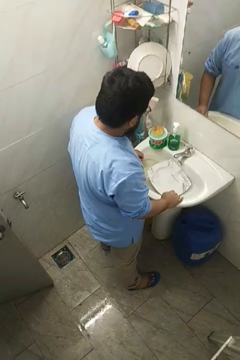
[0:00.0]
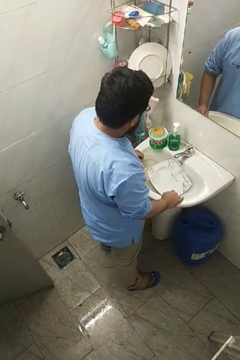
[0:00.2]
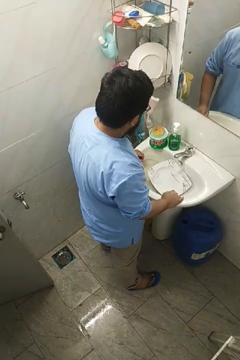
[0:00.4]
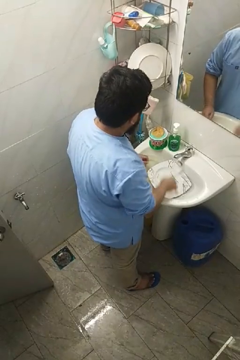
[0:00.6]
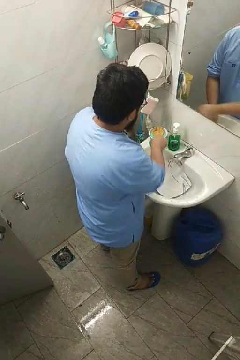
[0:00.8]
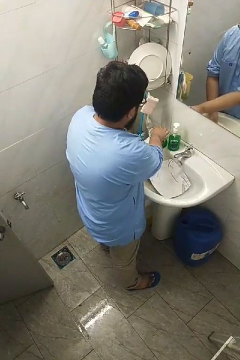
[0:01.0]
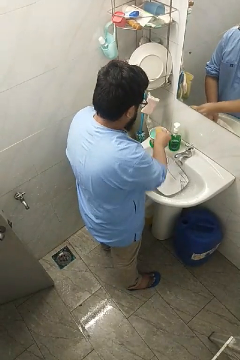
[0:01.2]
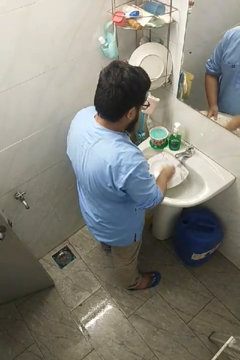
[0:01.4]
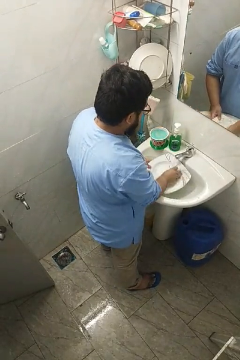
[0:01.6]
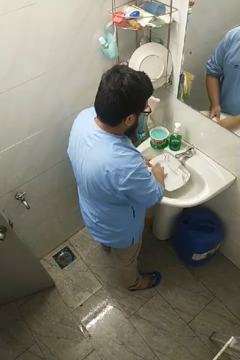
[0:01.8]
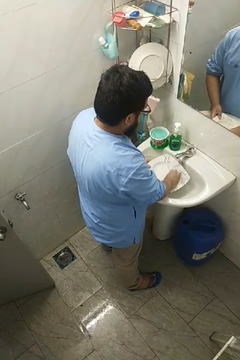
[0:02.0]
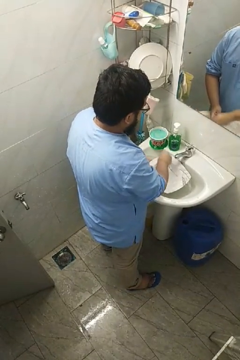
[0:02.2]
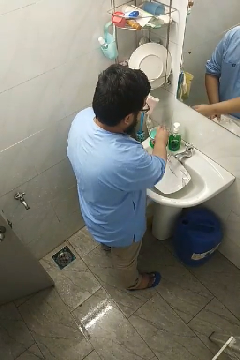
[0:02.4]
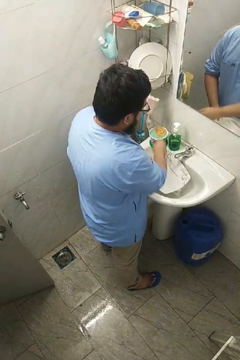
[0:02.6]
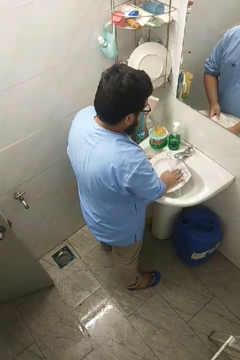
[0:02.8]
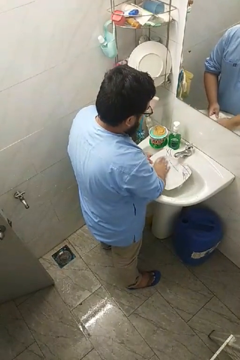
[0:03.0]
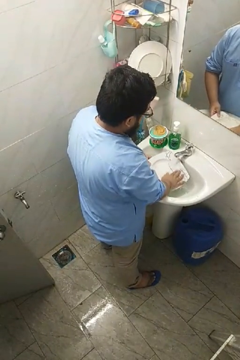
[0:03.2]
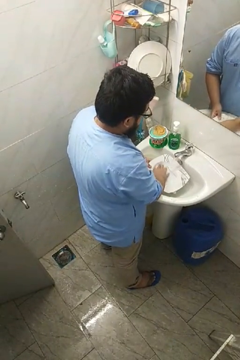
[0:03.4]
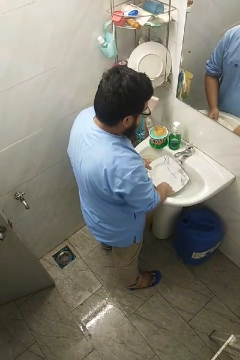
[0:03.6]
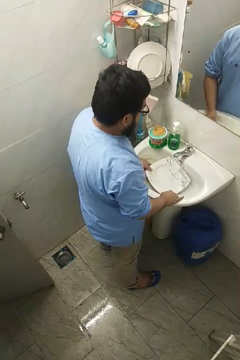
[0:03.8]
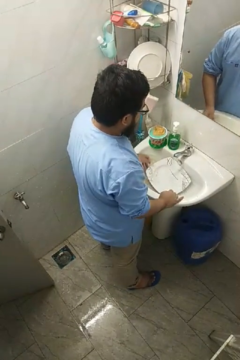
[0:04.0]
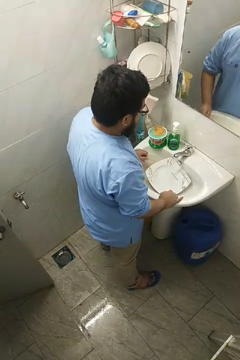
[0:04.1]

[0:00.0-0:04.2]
person washes dish

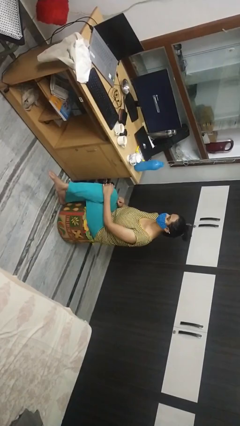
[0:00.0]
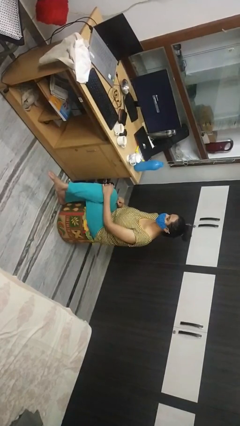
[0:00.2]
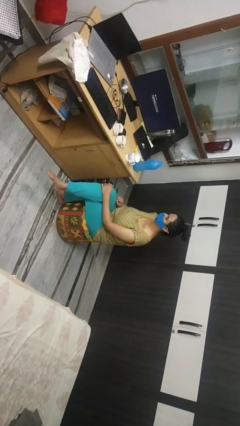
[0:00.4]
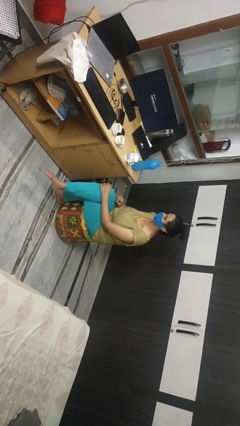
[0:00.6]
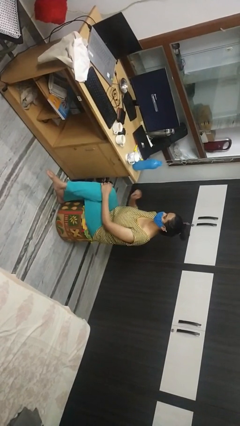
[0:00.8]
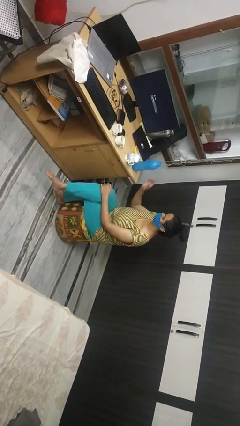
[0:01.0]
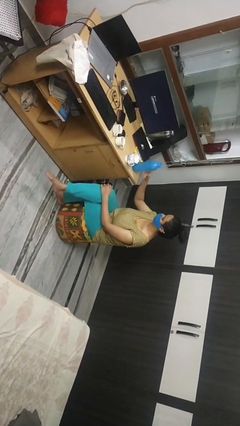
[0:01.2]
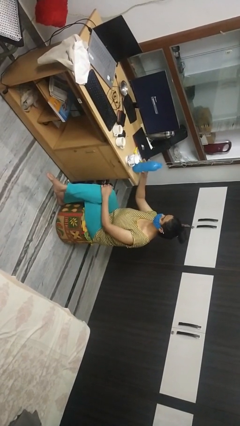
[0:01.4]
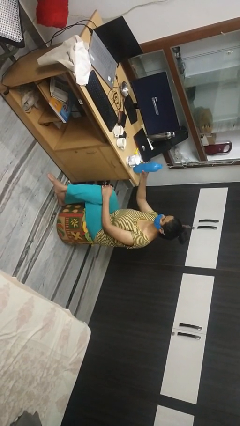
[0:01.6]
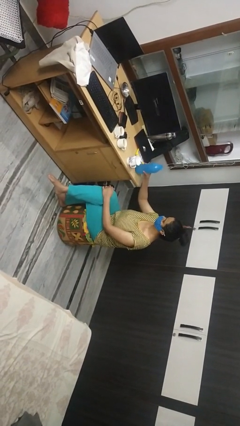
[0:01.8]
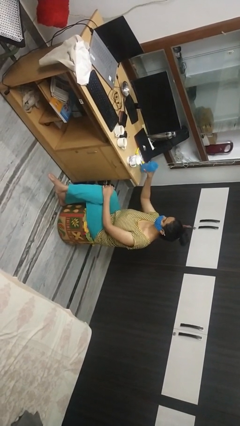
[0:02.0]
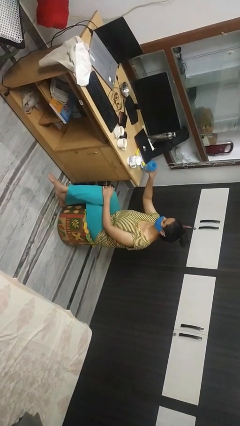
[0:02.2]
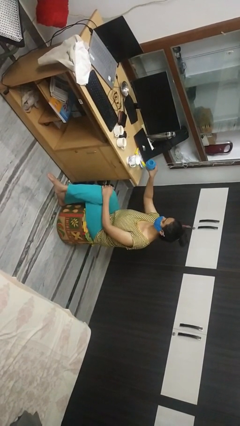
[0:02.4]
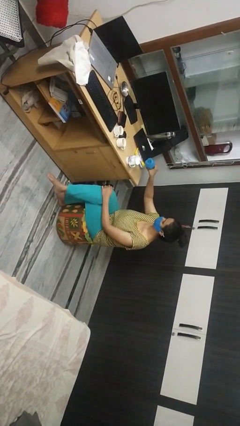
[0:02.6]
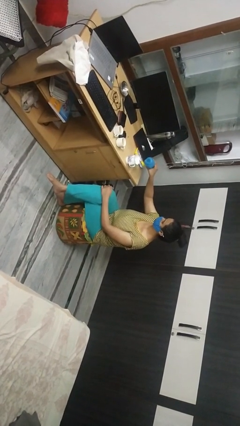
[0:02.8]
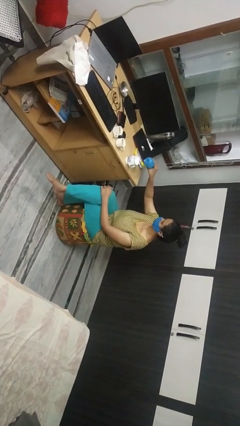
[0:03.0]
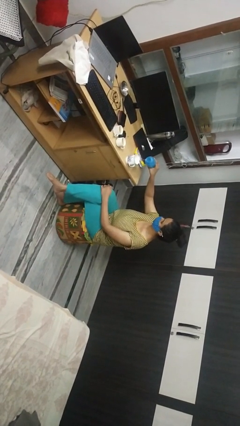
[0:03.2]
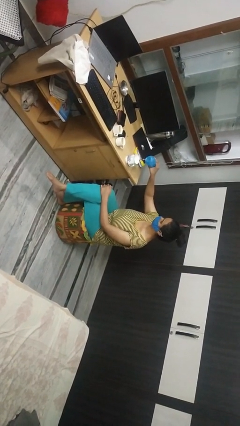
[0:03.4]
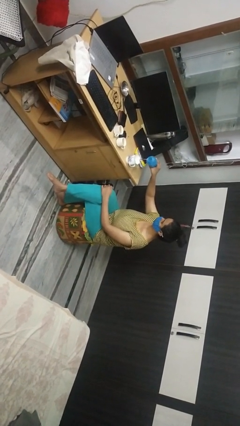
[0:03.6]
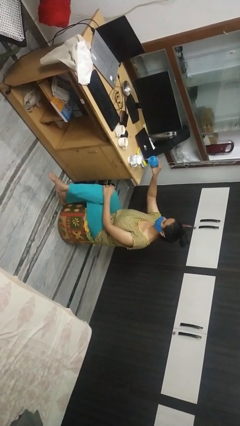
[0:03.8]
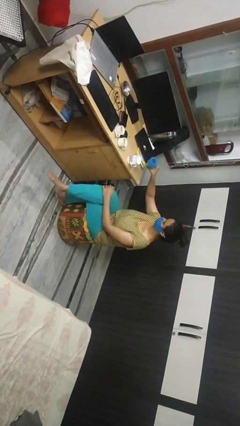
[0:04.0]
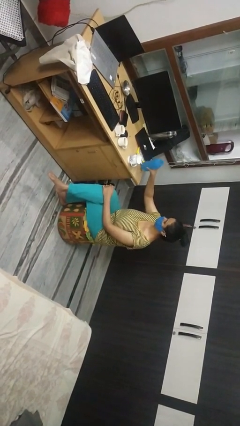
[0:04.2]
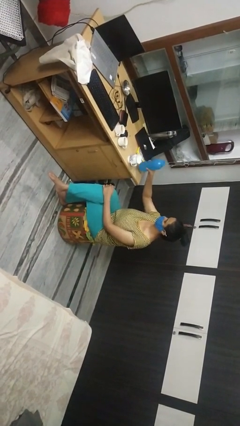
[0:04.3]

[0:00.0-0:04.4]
person pours liquid into cup

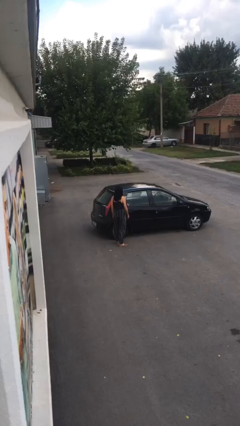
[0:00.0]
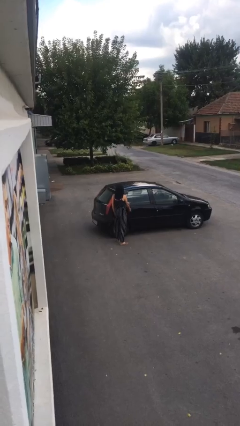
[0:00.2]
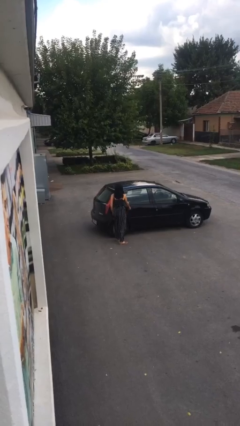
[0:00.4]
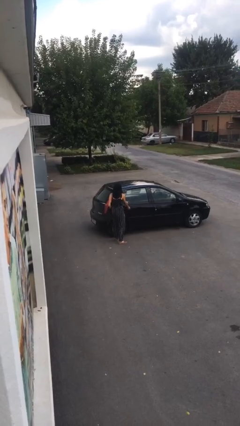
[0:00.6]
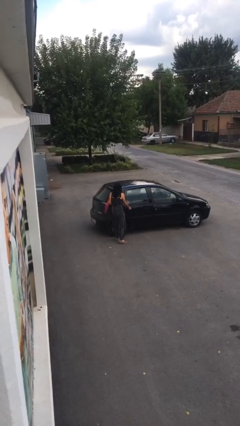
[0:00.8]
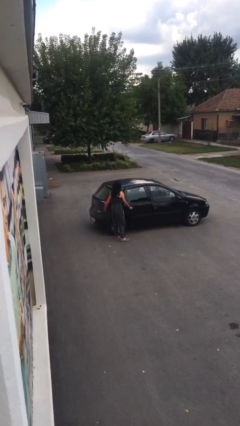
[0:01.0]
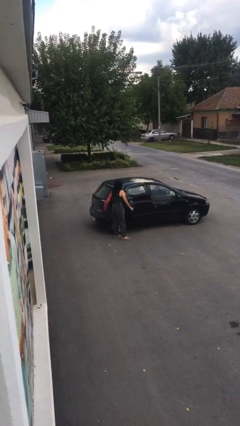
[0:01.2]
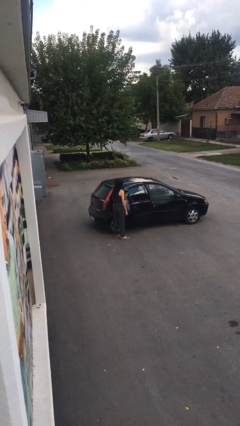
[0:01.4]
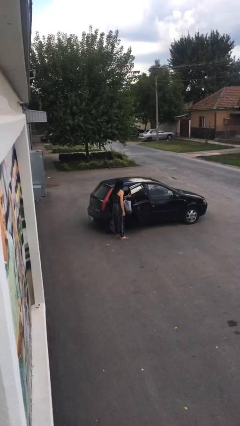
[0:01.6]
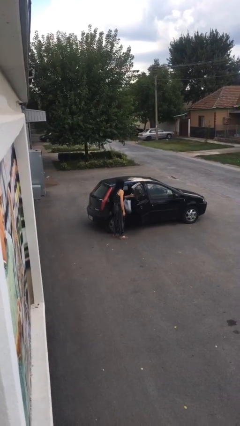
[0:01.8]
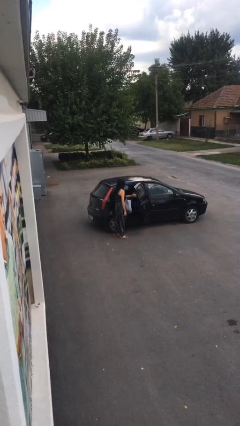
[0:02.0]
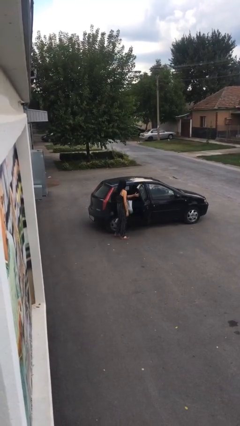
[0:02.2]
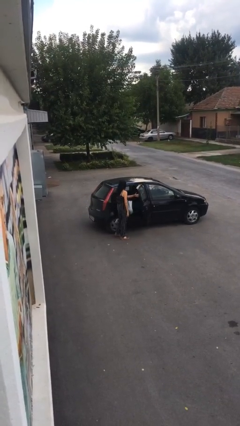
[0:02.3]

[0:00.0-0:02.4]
person opens car door

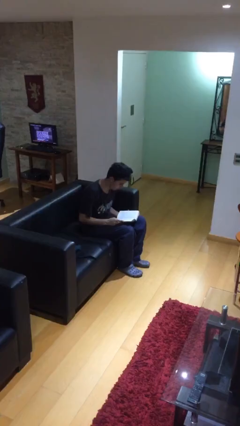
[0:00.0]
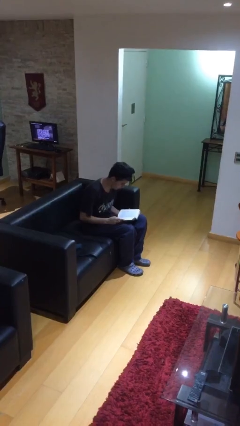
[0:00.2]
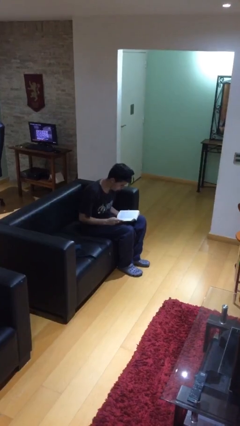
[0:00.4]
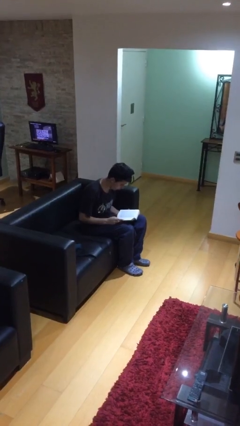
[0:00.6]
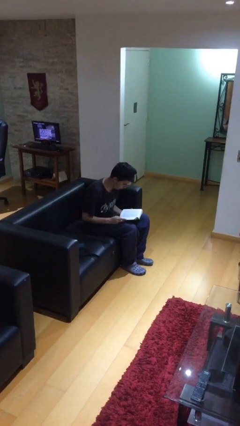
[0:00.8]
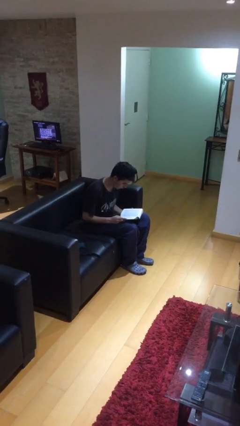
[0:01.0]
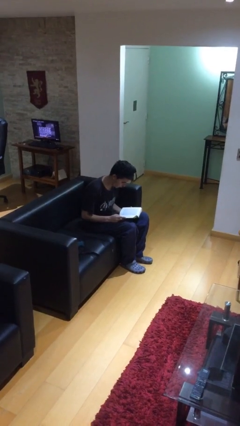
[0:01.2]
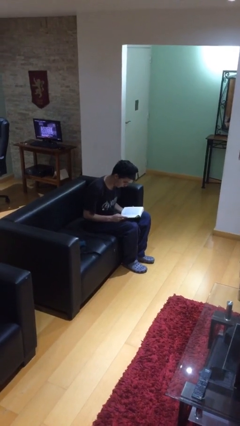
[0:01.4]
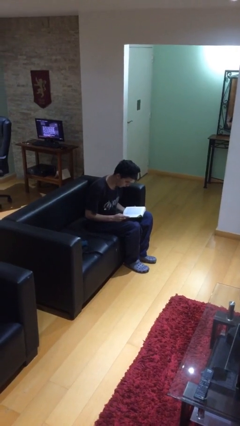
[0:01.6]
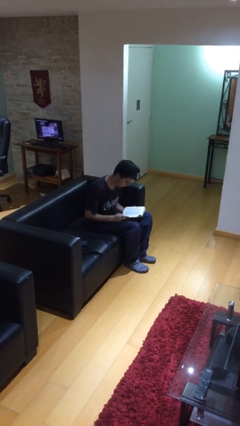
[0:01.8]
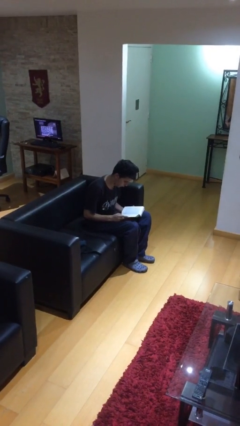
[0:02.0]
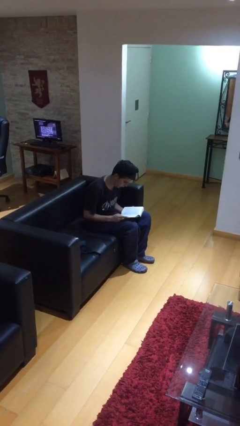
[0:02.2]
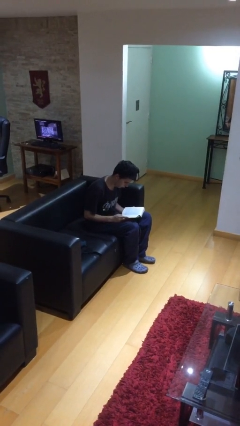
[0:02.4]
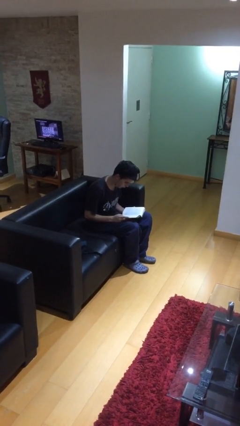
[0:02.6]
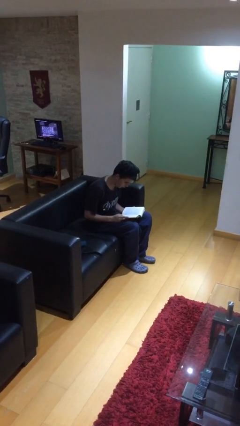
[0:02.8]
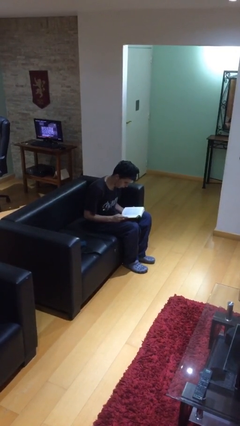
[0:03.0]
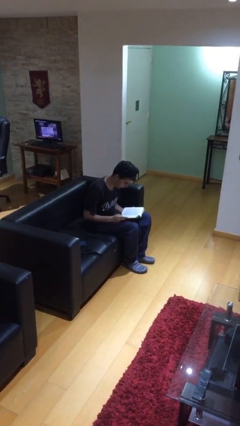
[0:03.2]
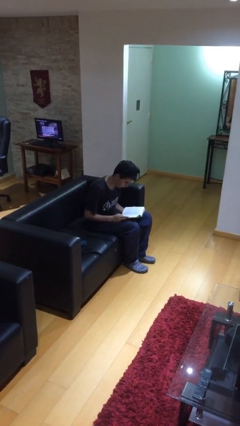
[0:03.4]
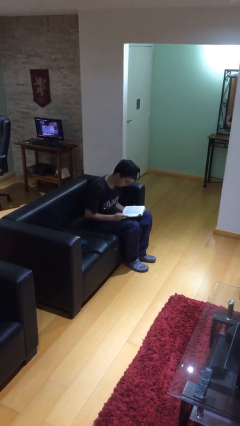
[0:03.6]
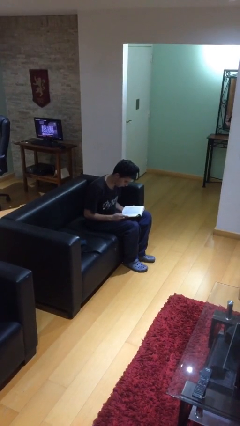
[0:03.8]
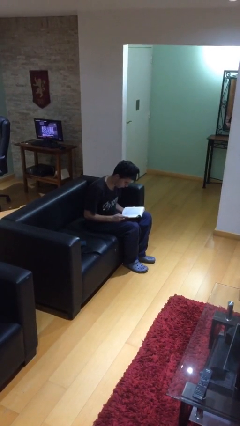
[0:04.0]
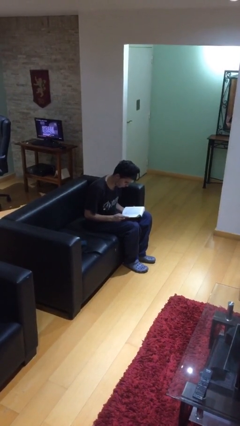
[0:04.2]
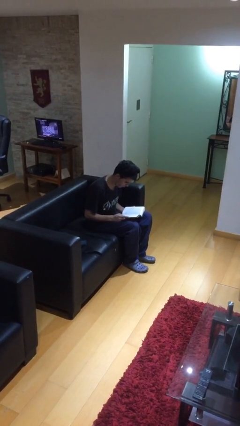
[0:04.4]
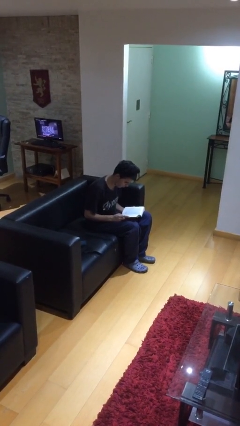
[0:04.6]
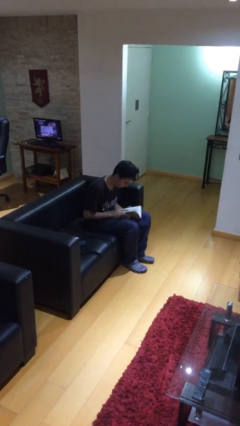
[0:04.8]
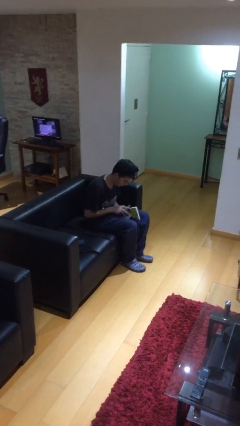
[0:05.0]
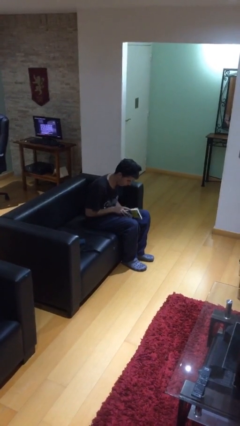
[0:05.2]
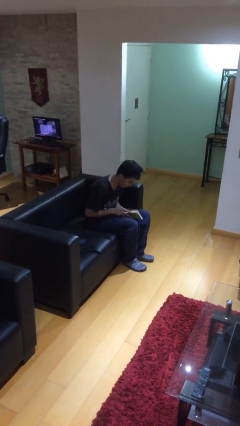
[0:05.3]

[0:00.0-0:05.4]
person reads document

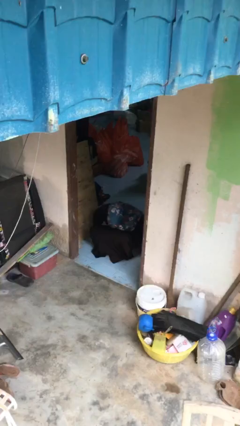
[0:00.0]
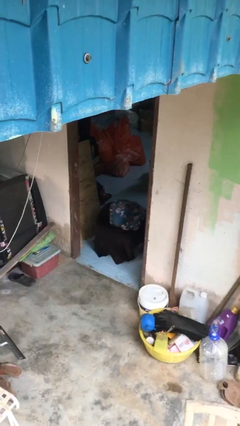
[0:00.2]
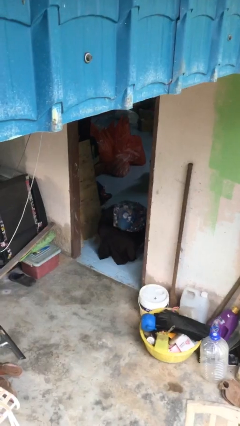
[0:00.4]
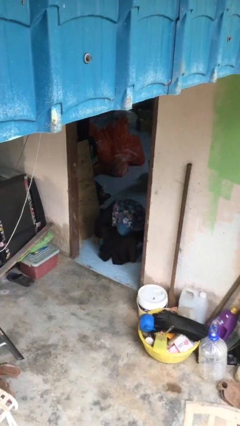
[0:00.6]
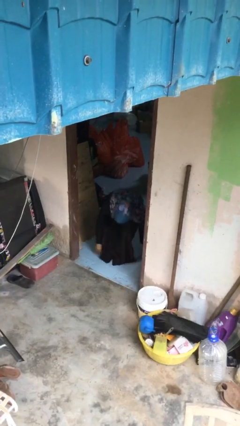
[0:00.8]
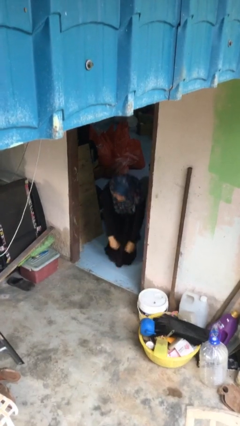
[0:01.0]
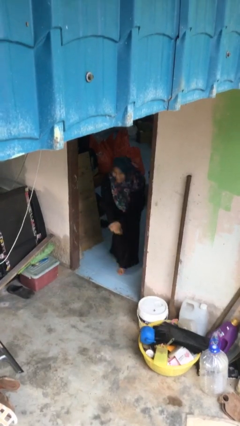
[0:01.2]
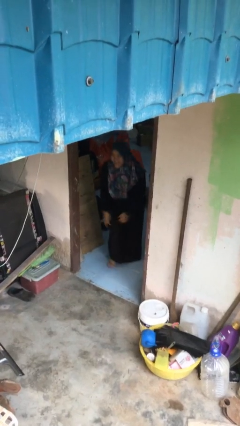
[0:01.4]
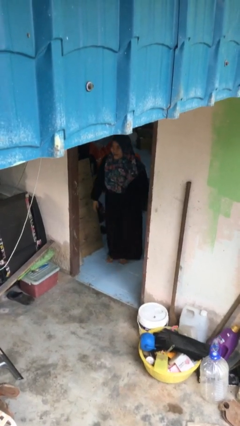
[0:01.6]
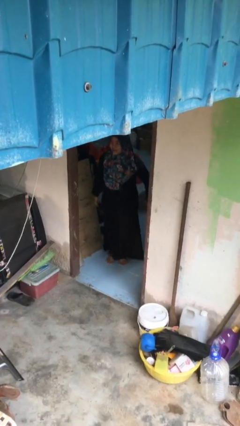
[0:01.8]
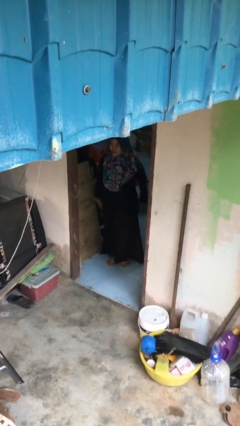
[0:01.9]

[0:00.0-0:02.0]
person stands up
